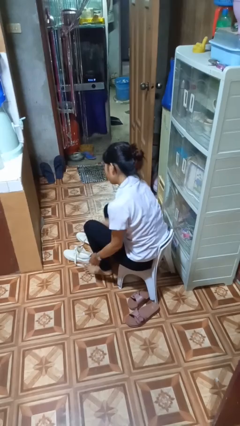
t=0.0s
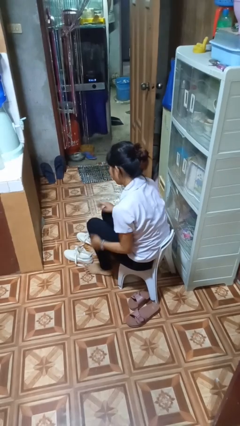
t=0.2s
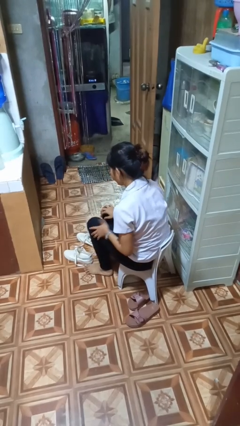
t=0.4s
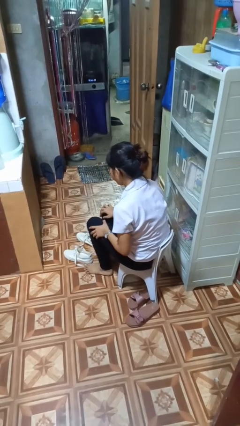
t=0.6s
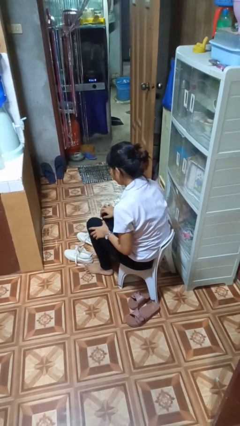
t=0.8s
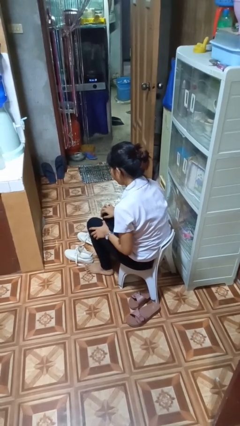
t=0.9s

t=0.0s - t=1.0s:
person takes off shoes

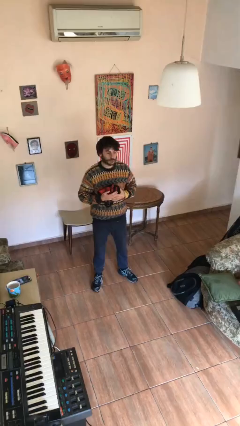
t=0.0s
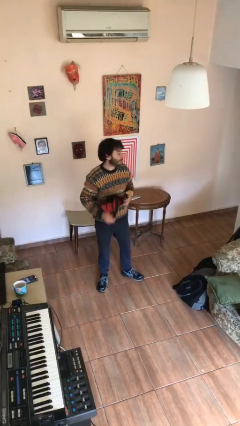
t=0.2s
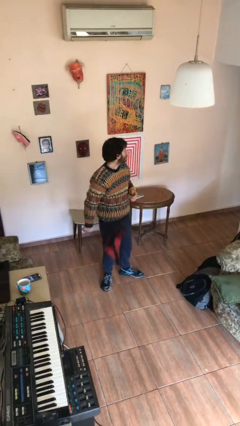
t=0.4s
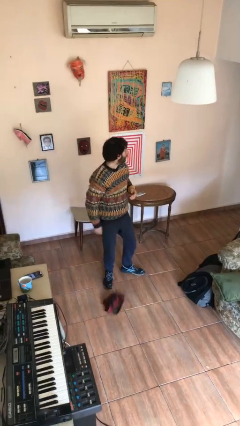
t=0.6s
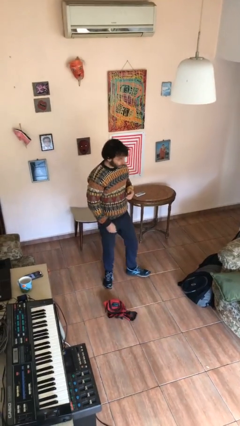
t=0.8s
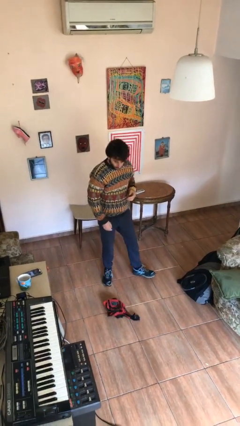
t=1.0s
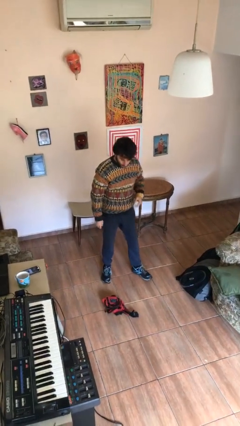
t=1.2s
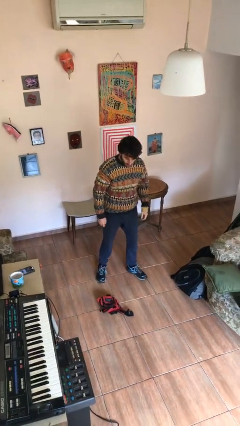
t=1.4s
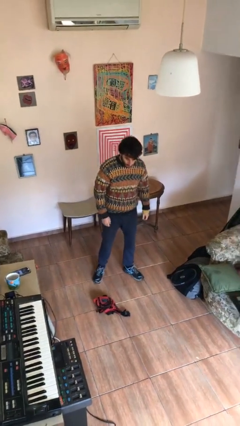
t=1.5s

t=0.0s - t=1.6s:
person drops object

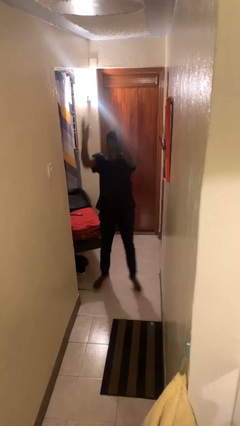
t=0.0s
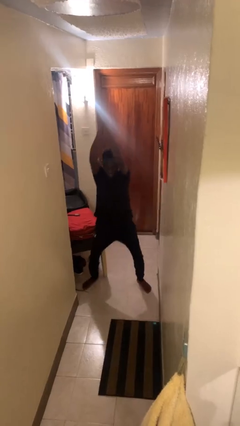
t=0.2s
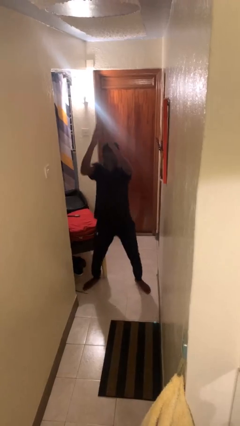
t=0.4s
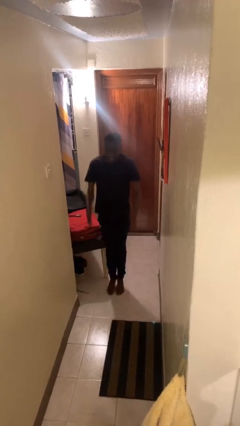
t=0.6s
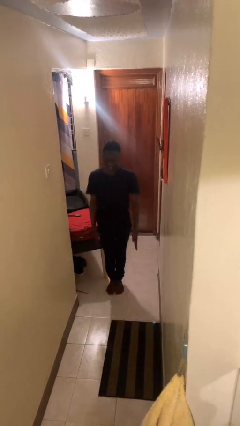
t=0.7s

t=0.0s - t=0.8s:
person exercises with jumping jacks

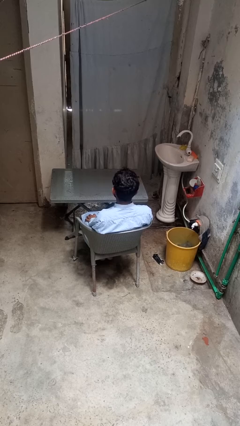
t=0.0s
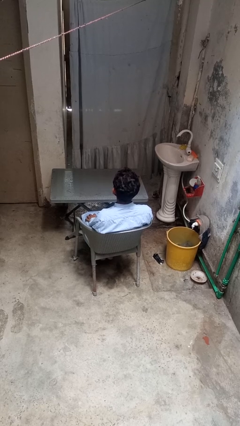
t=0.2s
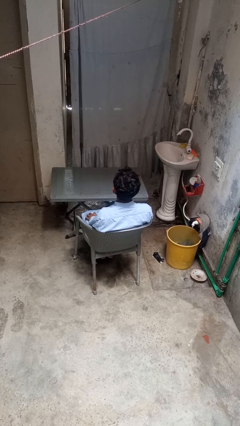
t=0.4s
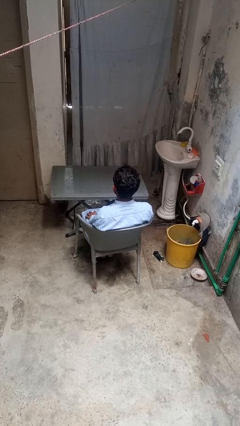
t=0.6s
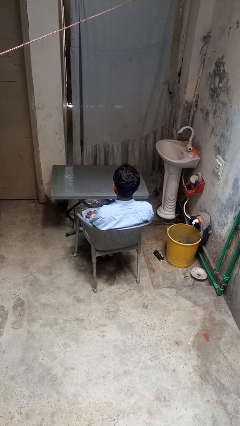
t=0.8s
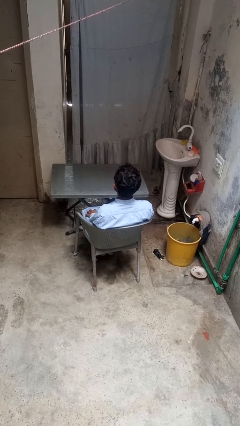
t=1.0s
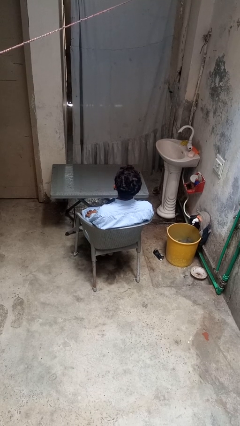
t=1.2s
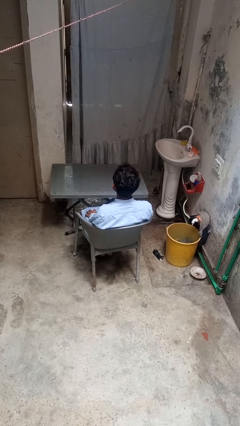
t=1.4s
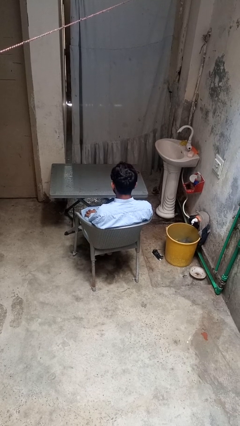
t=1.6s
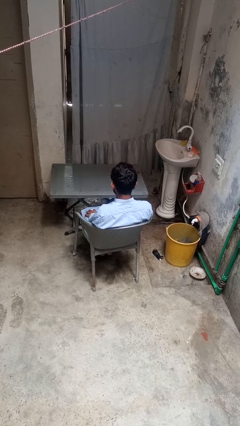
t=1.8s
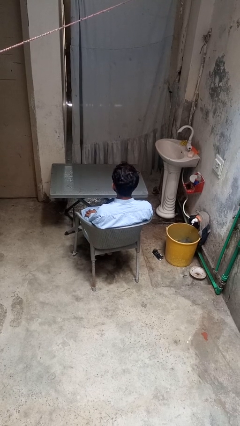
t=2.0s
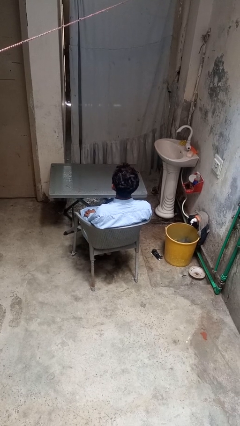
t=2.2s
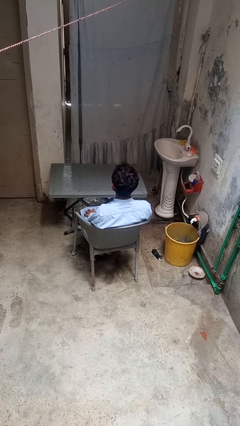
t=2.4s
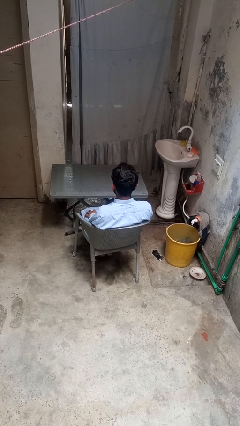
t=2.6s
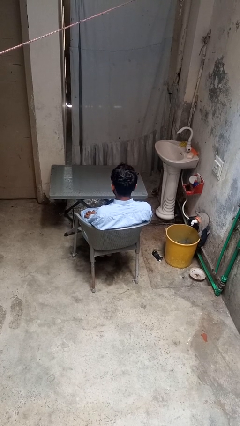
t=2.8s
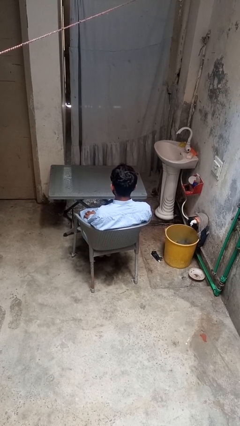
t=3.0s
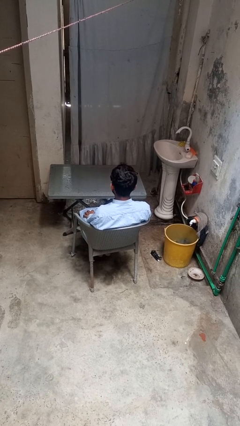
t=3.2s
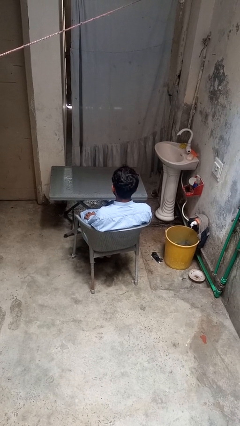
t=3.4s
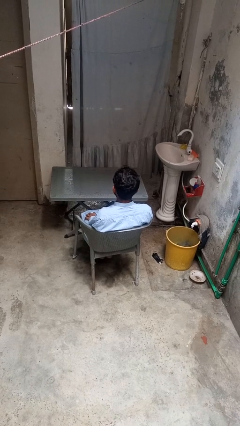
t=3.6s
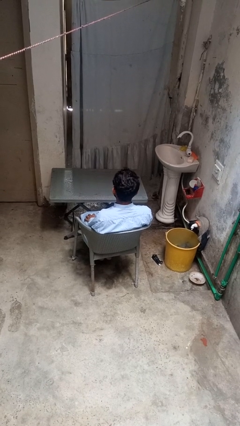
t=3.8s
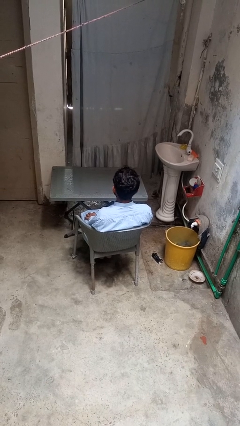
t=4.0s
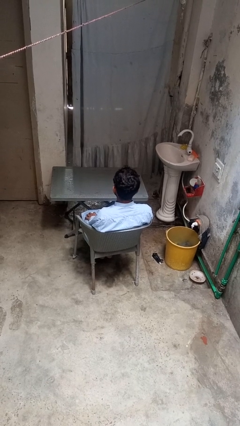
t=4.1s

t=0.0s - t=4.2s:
person nods head

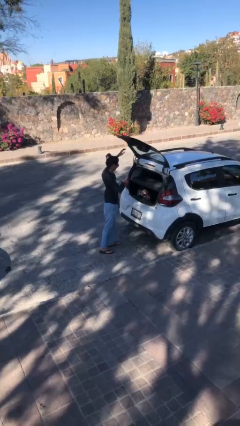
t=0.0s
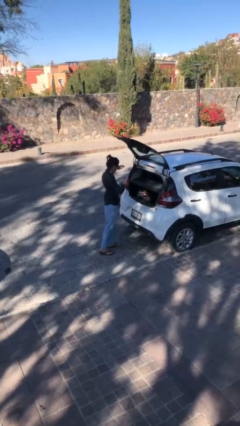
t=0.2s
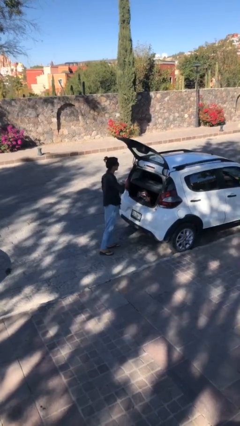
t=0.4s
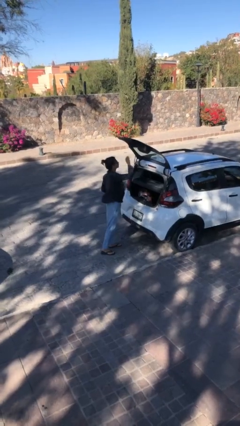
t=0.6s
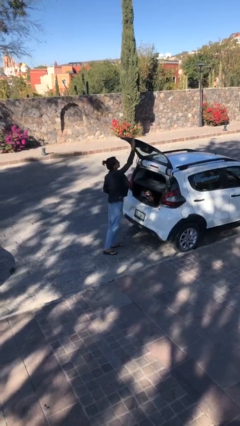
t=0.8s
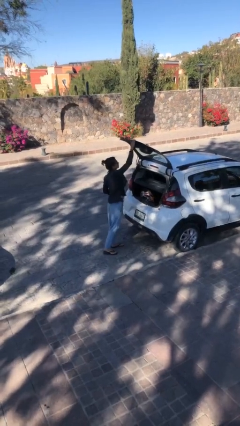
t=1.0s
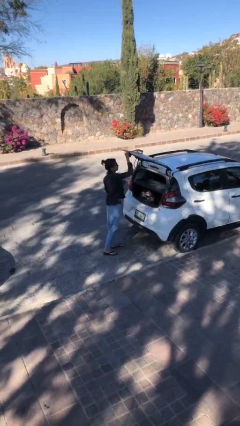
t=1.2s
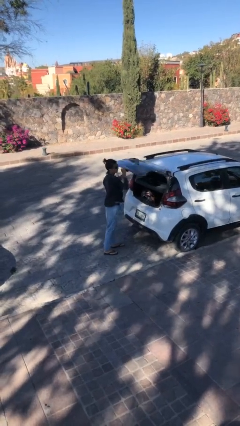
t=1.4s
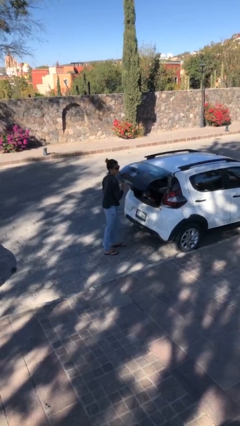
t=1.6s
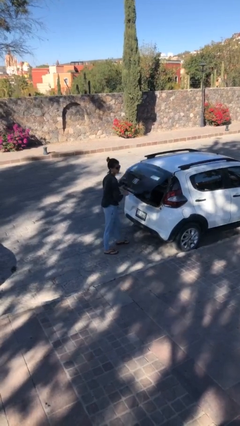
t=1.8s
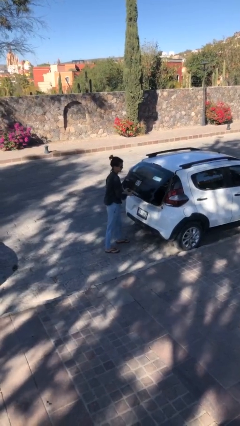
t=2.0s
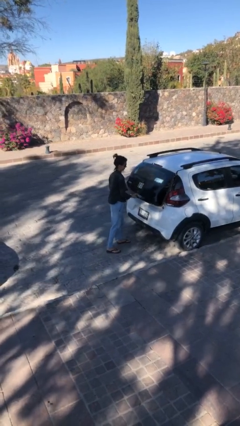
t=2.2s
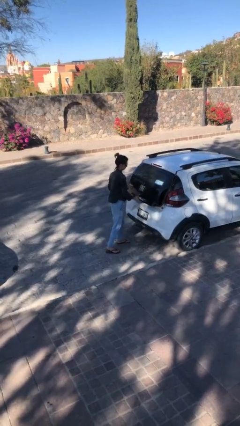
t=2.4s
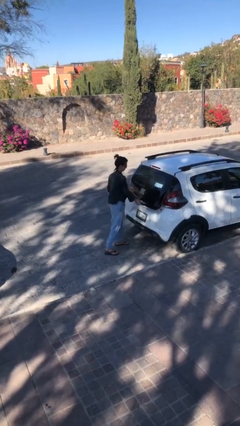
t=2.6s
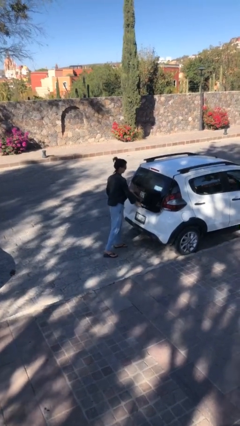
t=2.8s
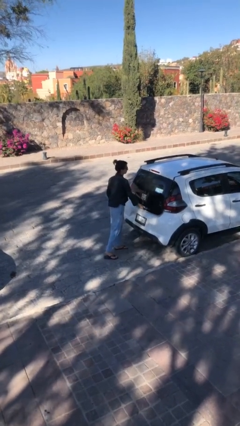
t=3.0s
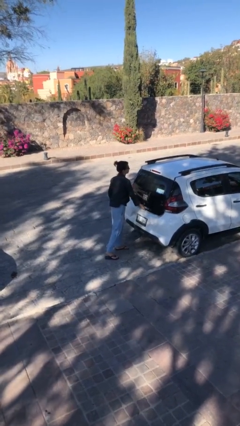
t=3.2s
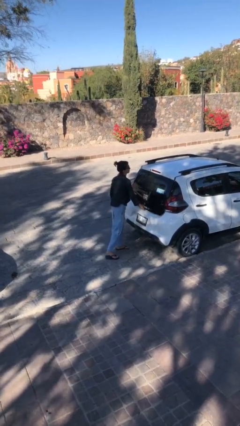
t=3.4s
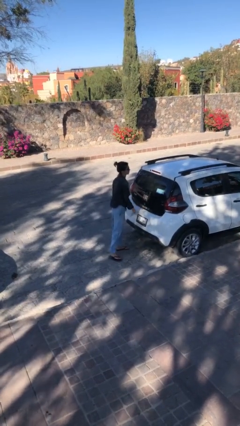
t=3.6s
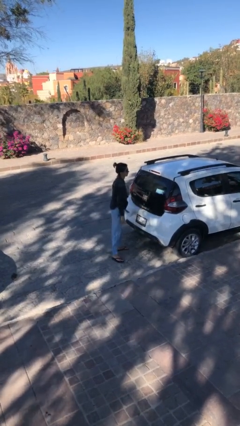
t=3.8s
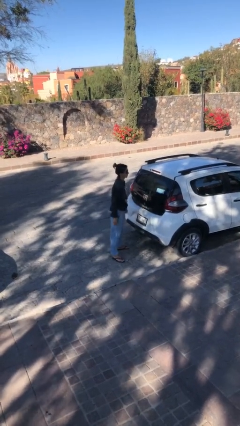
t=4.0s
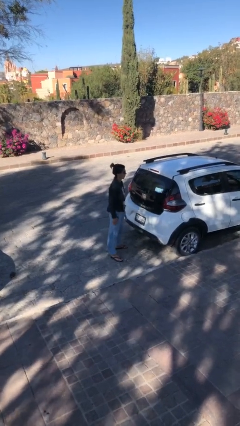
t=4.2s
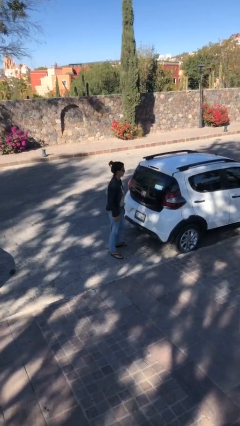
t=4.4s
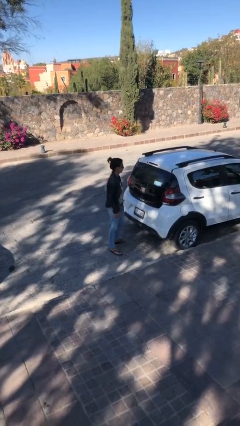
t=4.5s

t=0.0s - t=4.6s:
person closes car trunk

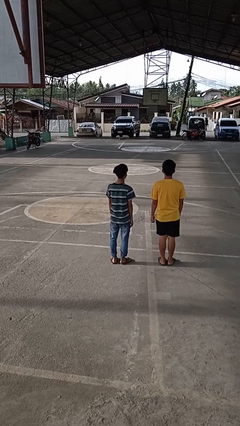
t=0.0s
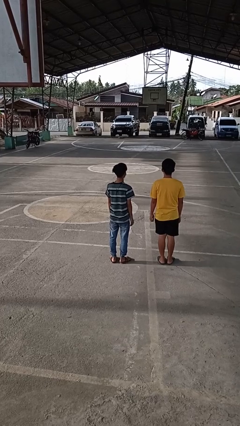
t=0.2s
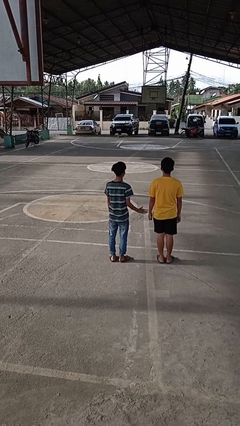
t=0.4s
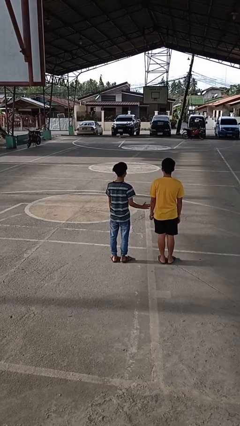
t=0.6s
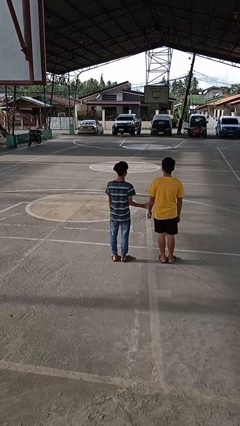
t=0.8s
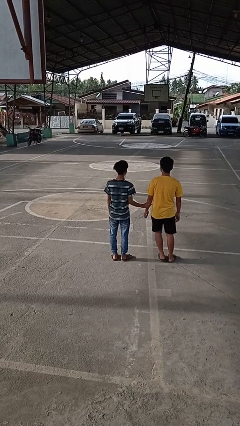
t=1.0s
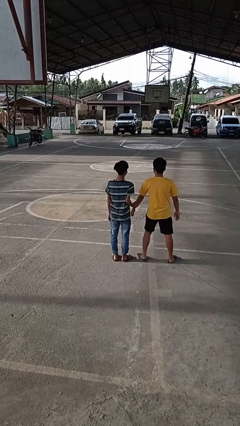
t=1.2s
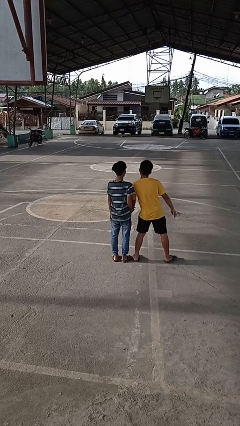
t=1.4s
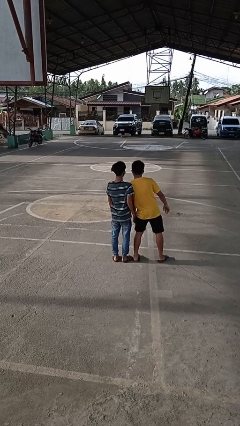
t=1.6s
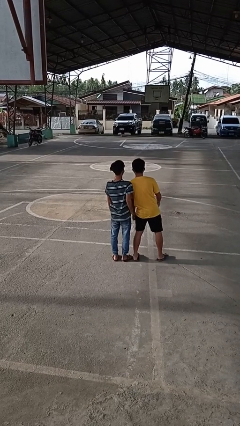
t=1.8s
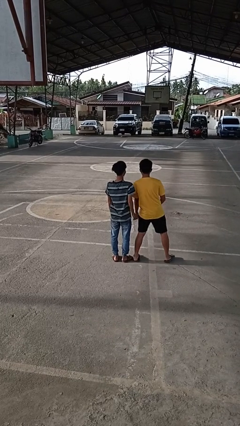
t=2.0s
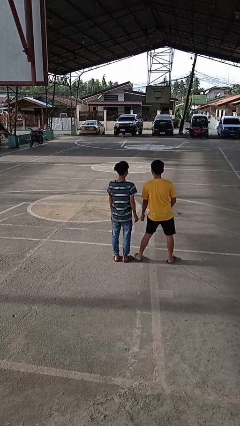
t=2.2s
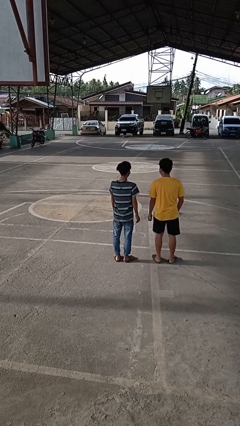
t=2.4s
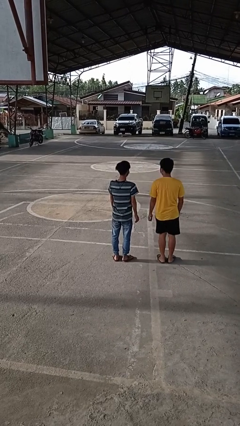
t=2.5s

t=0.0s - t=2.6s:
person grabs person by forearm

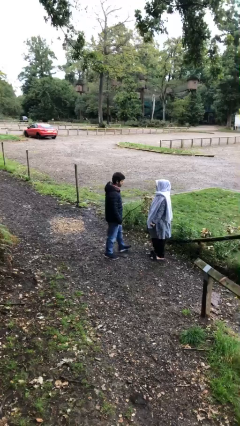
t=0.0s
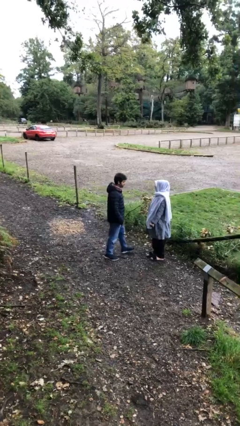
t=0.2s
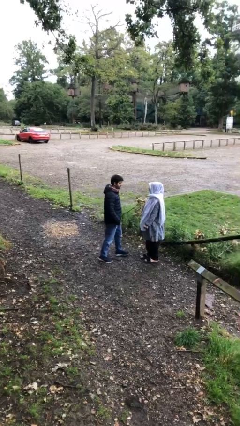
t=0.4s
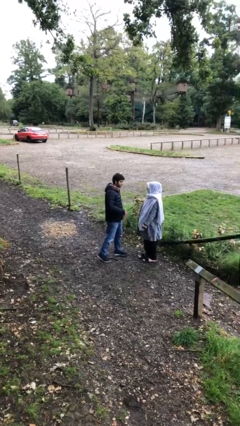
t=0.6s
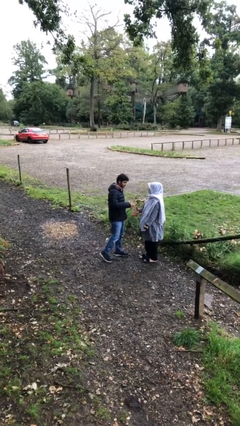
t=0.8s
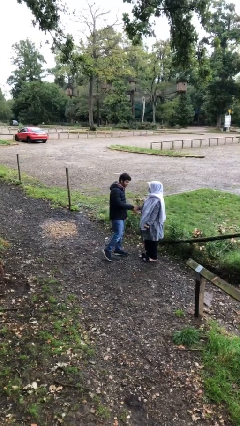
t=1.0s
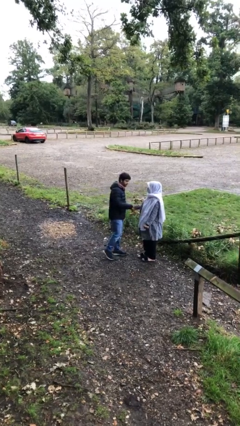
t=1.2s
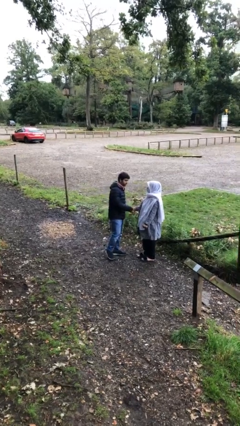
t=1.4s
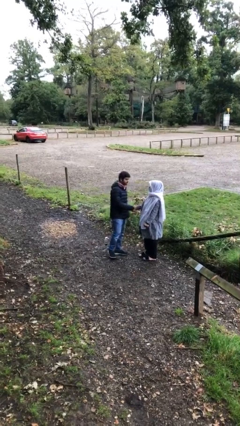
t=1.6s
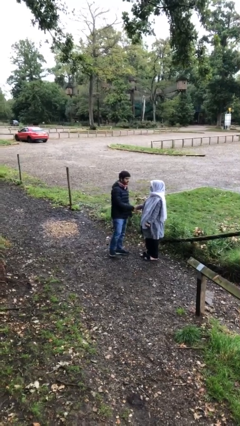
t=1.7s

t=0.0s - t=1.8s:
person shakes hand

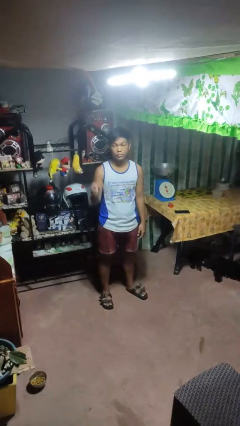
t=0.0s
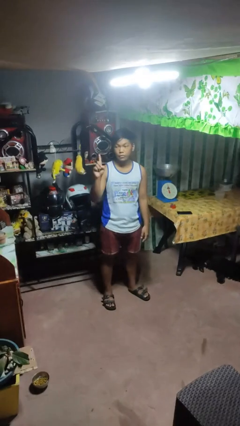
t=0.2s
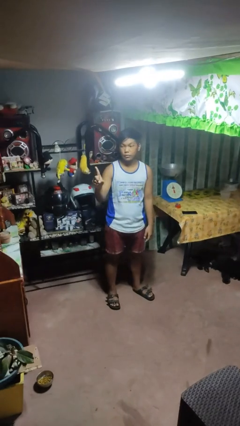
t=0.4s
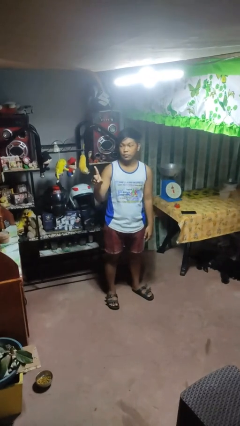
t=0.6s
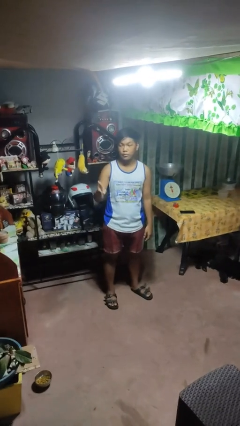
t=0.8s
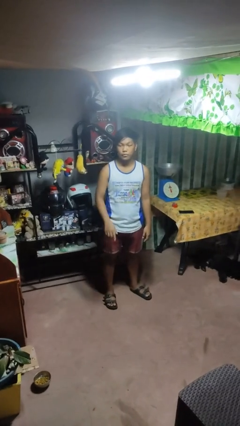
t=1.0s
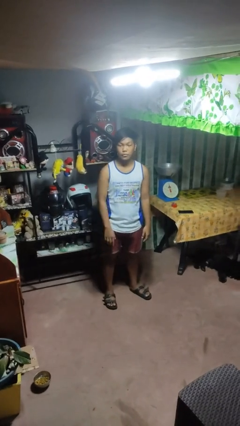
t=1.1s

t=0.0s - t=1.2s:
person gestures number one
